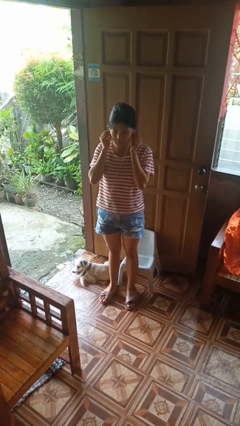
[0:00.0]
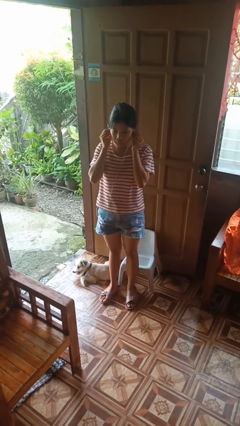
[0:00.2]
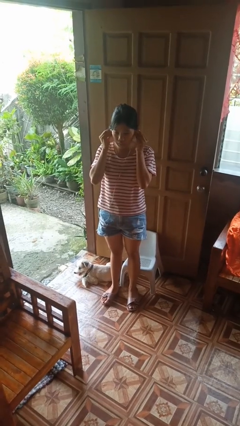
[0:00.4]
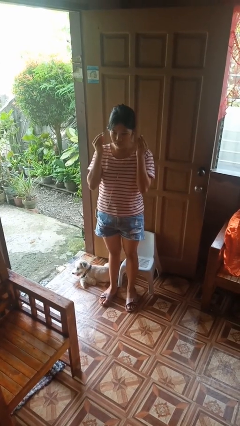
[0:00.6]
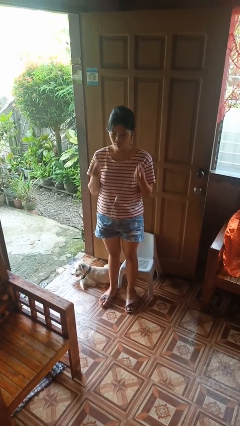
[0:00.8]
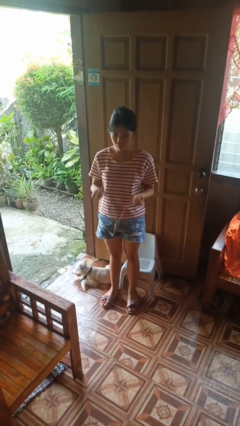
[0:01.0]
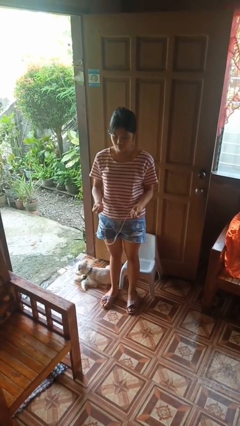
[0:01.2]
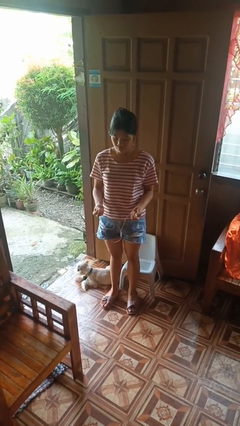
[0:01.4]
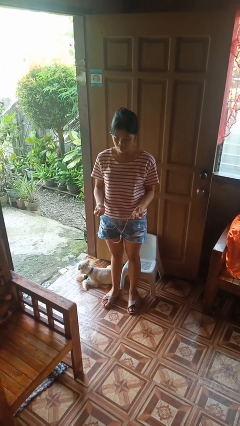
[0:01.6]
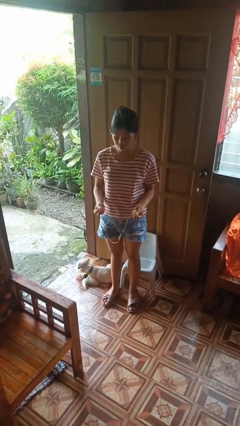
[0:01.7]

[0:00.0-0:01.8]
person takes off headphones

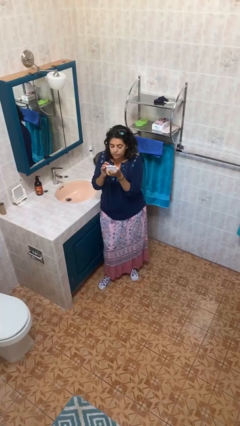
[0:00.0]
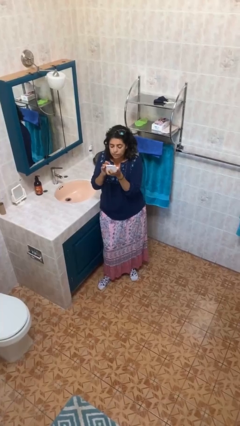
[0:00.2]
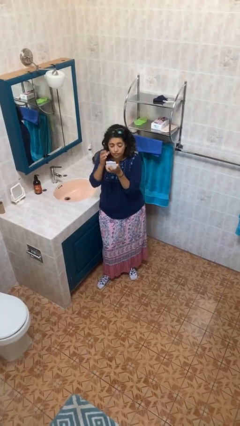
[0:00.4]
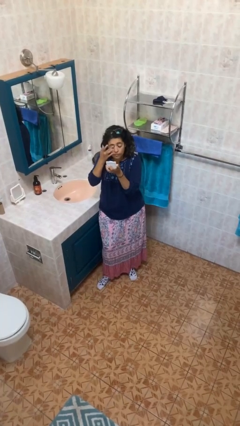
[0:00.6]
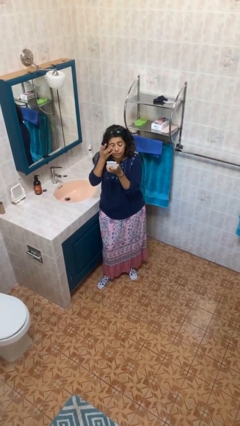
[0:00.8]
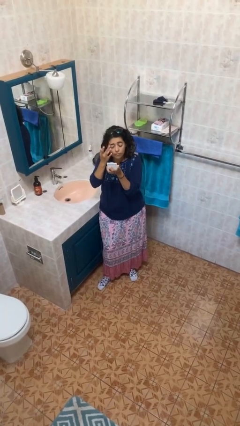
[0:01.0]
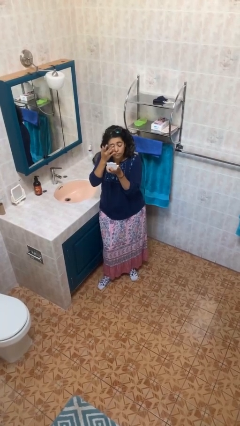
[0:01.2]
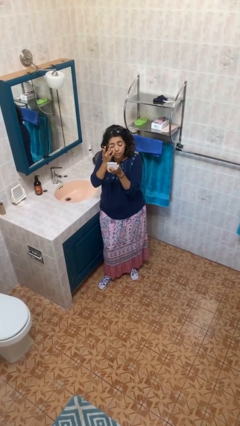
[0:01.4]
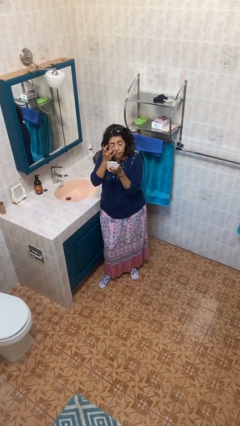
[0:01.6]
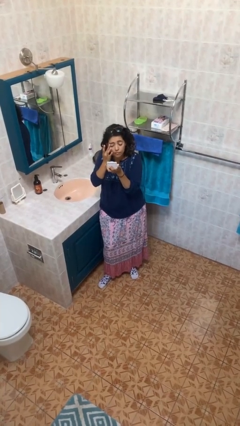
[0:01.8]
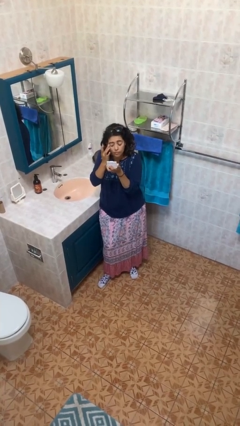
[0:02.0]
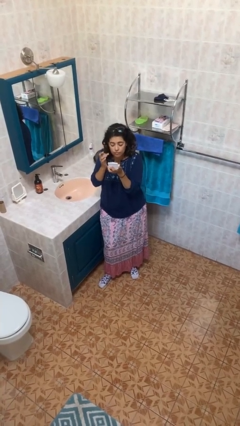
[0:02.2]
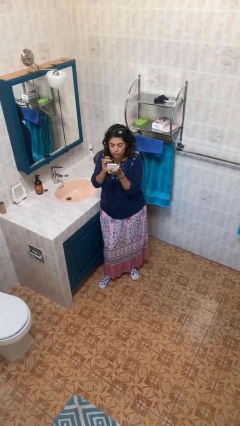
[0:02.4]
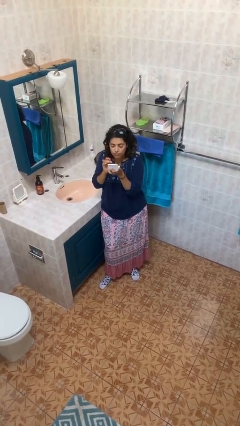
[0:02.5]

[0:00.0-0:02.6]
person applies eye makeup

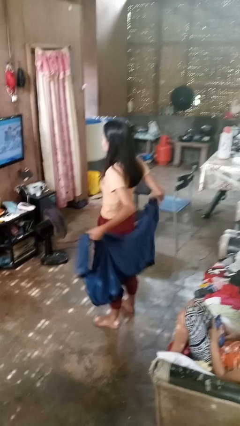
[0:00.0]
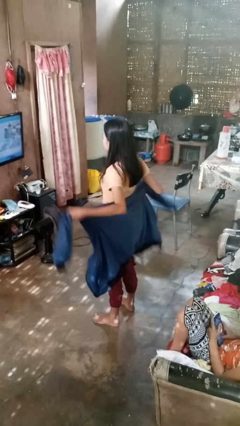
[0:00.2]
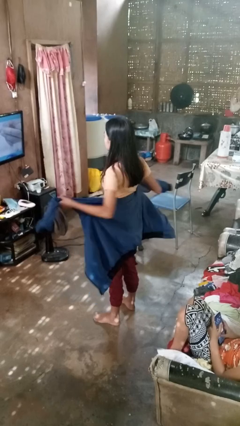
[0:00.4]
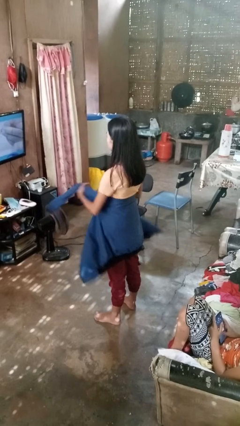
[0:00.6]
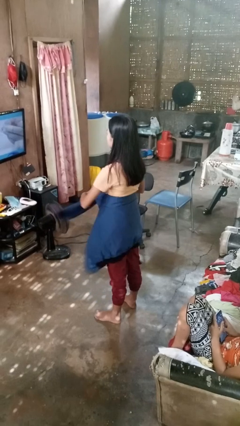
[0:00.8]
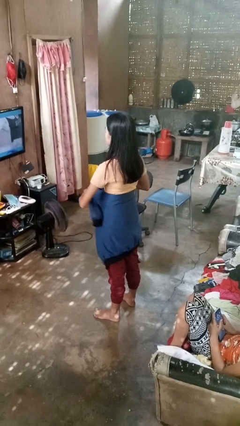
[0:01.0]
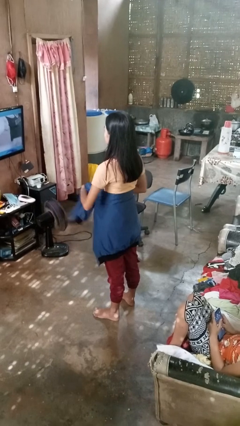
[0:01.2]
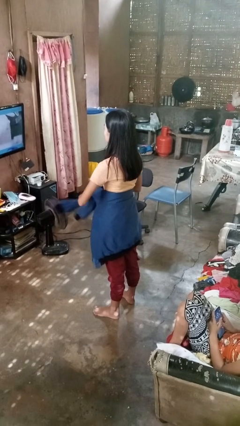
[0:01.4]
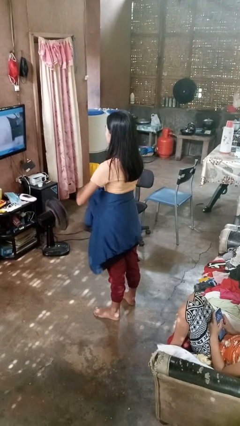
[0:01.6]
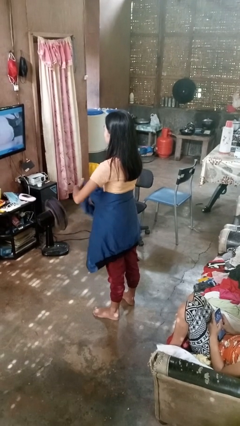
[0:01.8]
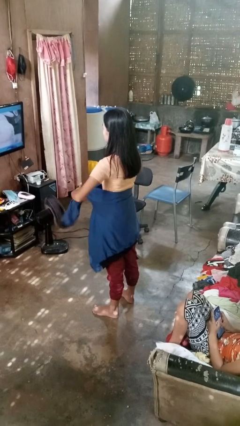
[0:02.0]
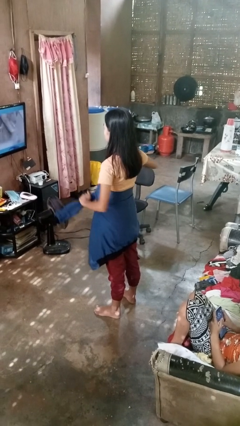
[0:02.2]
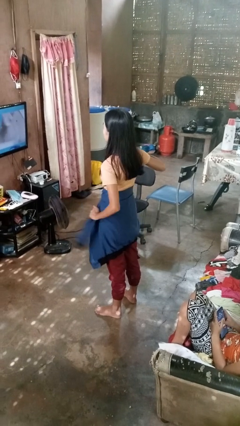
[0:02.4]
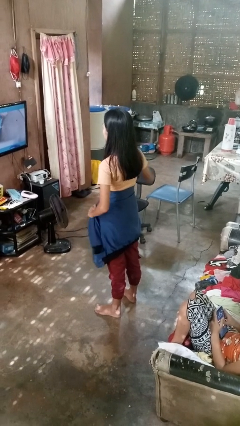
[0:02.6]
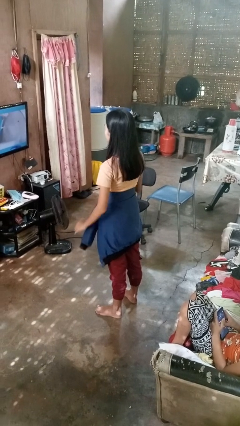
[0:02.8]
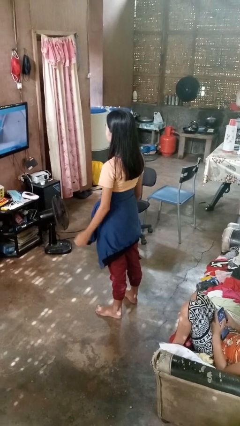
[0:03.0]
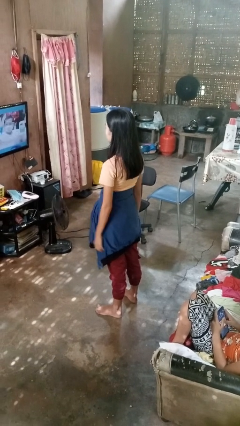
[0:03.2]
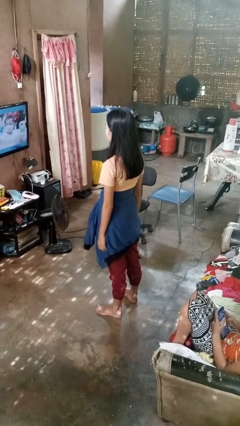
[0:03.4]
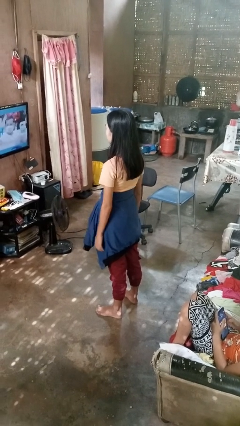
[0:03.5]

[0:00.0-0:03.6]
person ties jacket around waist

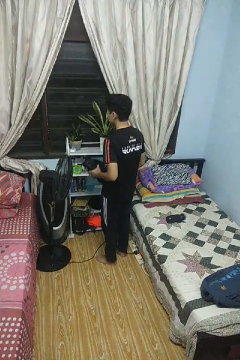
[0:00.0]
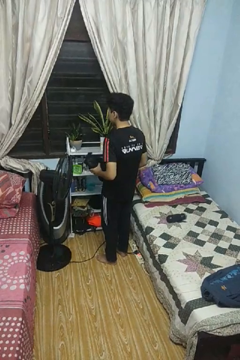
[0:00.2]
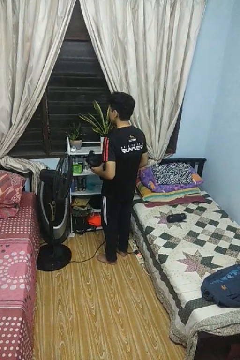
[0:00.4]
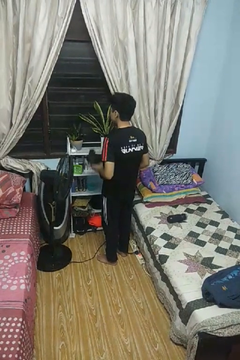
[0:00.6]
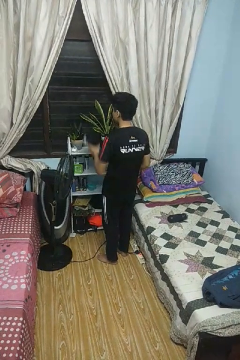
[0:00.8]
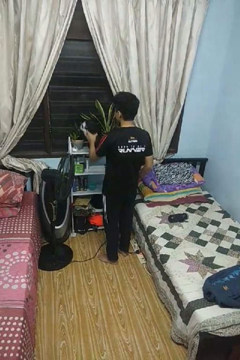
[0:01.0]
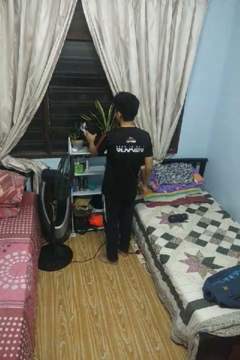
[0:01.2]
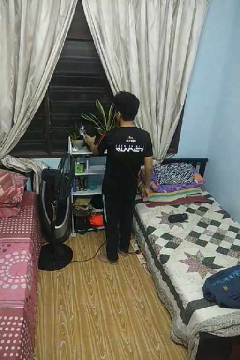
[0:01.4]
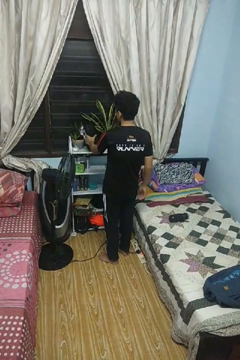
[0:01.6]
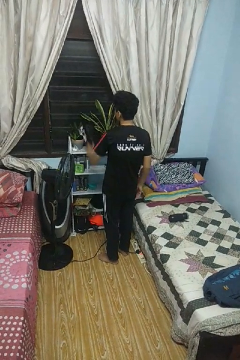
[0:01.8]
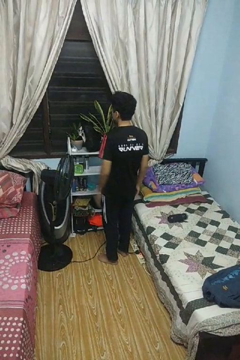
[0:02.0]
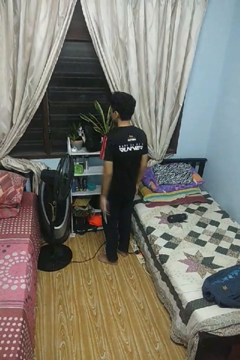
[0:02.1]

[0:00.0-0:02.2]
person puts down object on countertop

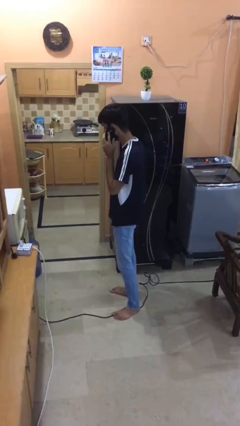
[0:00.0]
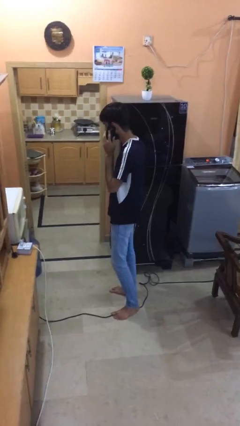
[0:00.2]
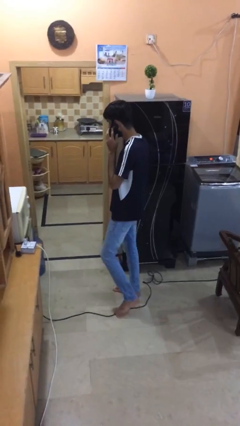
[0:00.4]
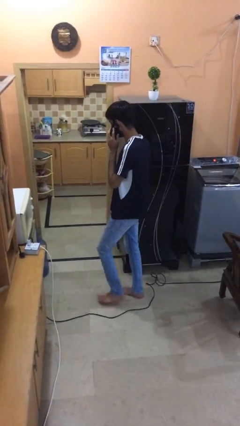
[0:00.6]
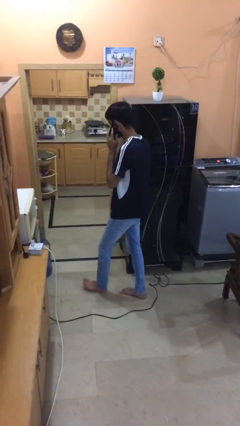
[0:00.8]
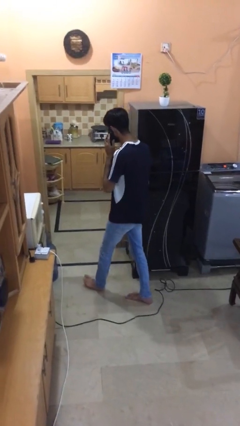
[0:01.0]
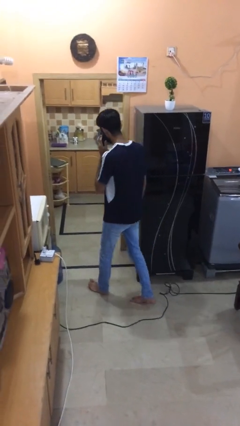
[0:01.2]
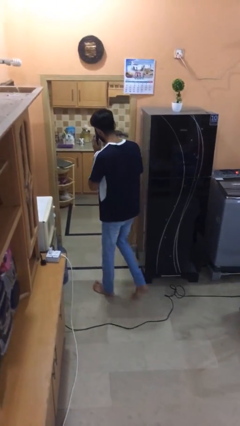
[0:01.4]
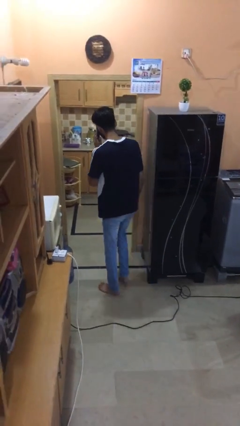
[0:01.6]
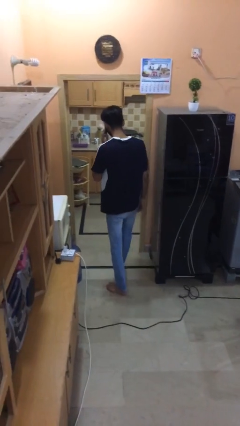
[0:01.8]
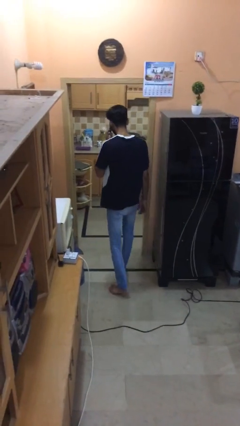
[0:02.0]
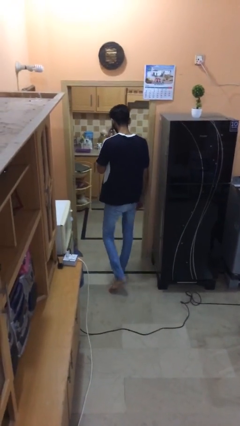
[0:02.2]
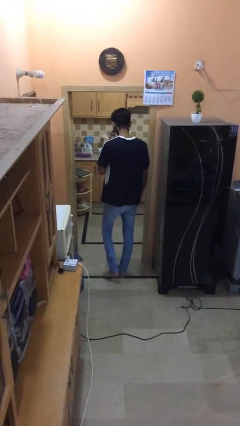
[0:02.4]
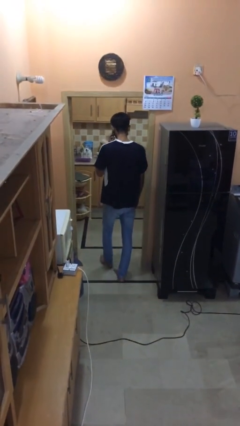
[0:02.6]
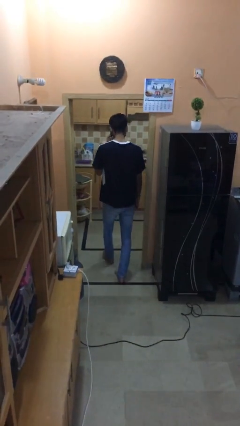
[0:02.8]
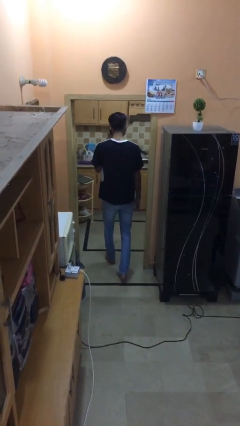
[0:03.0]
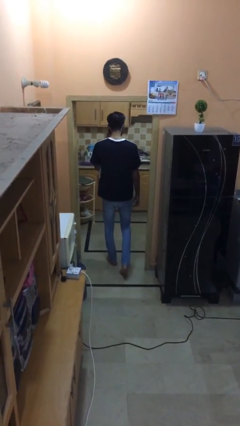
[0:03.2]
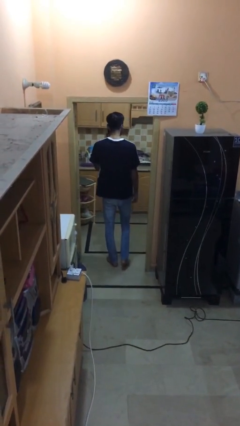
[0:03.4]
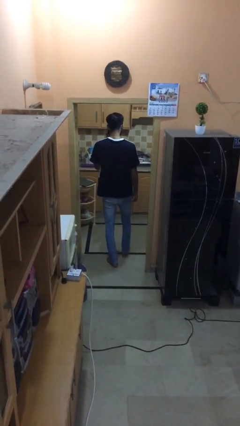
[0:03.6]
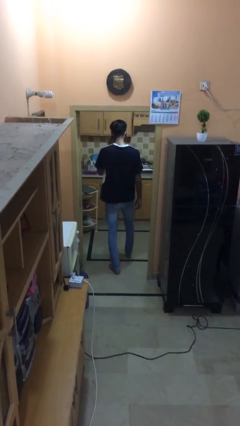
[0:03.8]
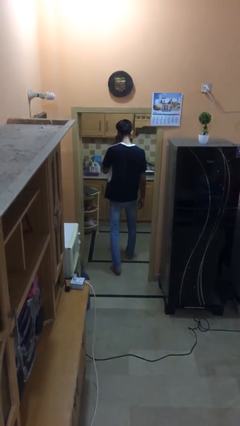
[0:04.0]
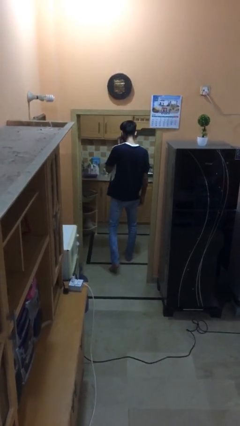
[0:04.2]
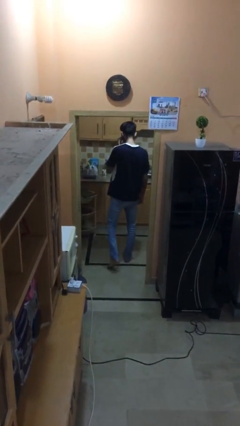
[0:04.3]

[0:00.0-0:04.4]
person exits scene through structure

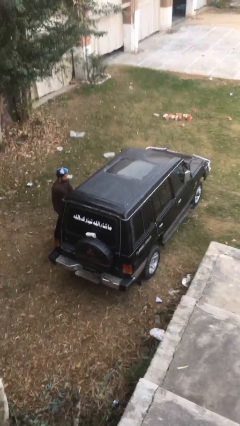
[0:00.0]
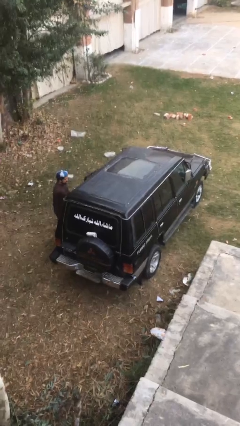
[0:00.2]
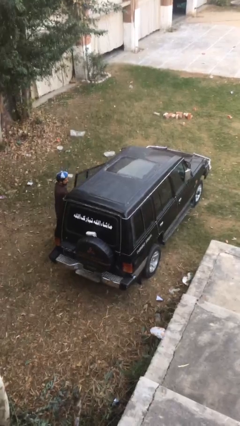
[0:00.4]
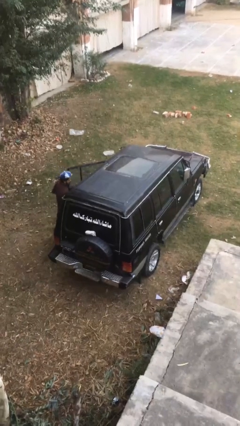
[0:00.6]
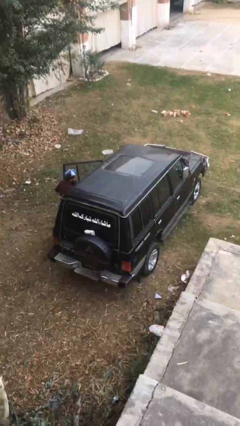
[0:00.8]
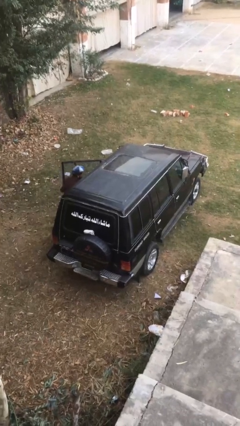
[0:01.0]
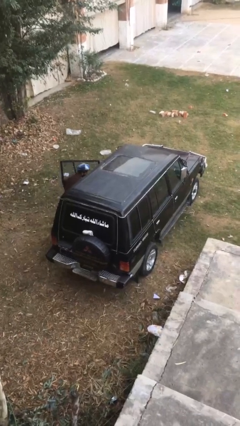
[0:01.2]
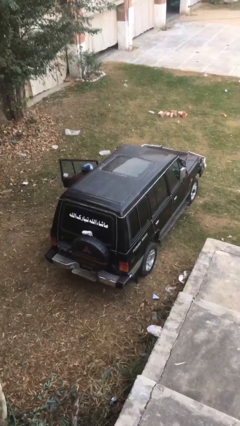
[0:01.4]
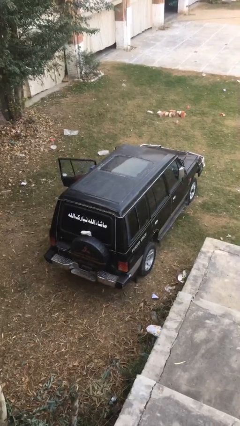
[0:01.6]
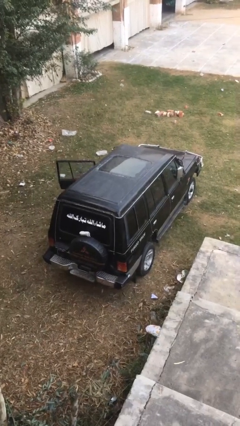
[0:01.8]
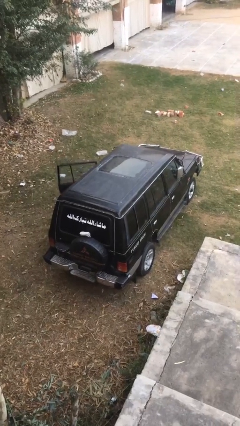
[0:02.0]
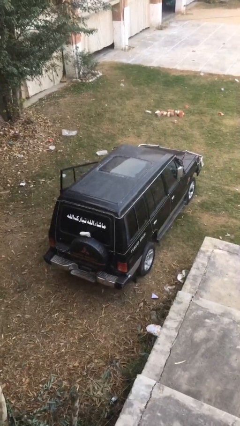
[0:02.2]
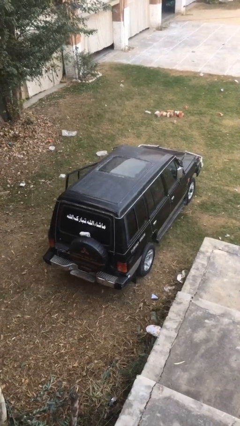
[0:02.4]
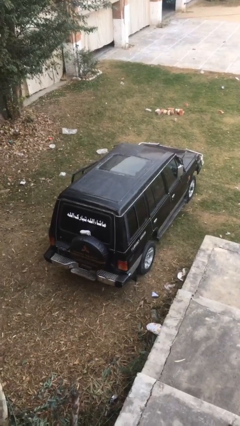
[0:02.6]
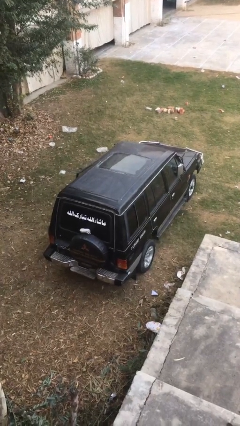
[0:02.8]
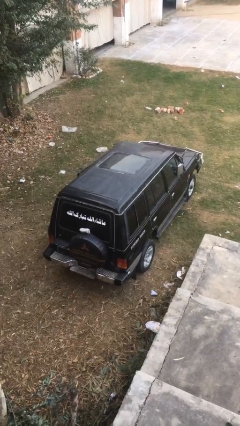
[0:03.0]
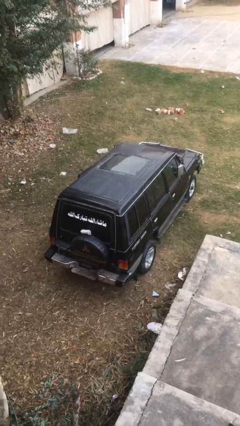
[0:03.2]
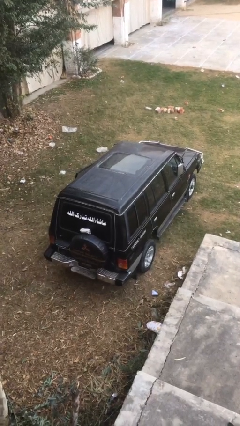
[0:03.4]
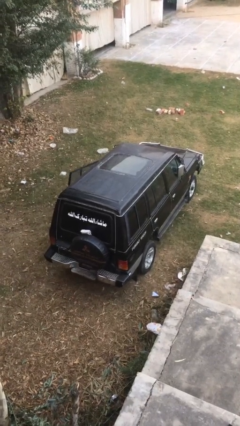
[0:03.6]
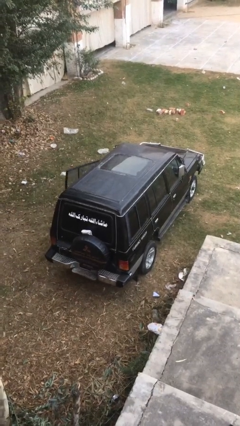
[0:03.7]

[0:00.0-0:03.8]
car picks up person
